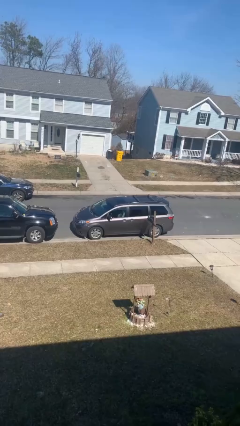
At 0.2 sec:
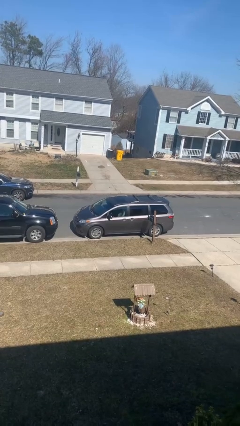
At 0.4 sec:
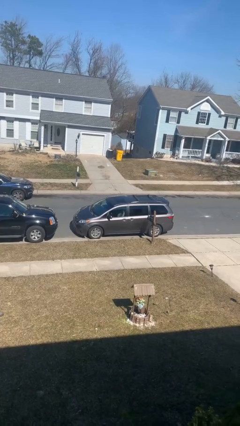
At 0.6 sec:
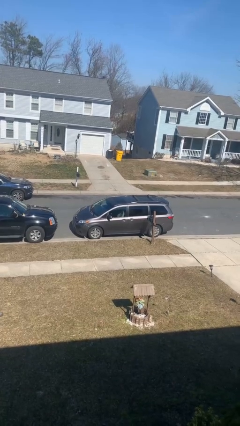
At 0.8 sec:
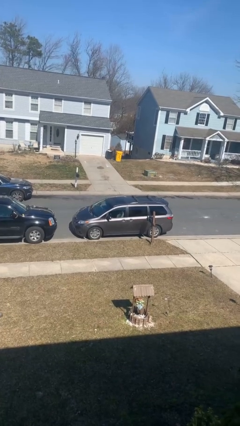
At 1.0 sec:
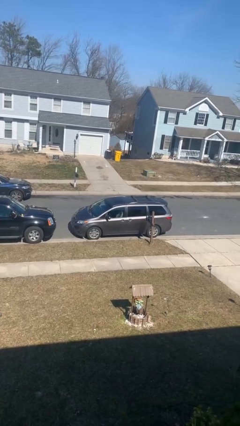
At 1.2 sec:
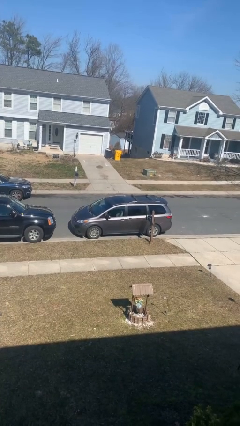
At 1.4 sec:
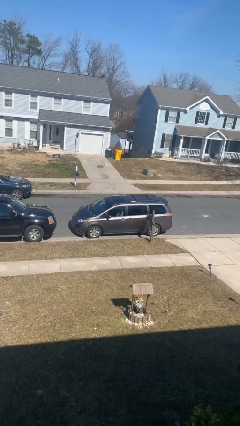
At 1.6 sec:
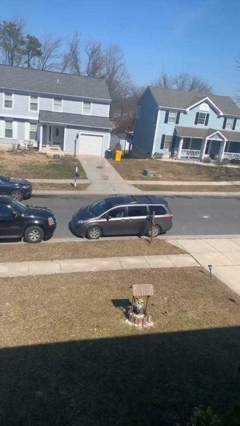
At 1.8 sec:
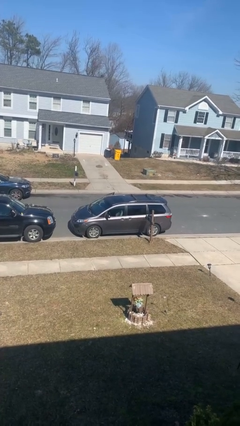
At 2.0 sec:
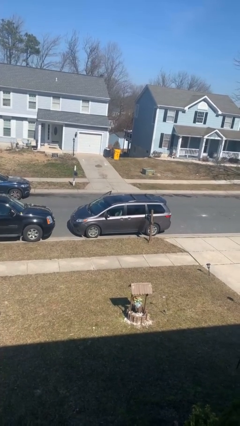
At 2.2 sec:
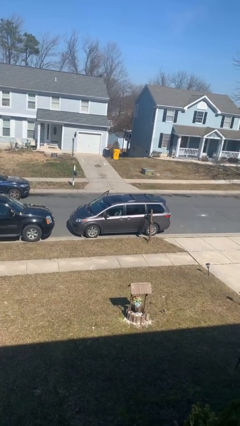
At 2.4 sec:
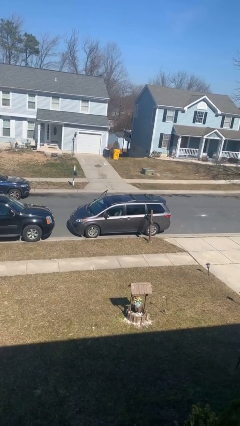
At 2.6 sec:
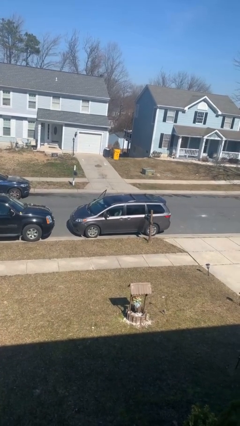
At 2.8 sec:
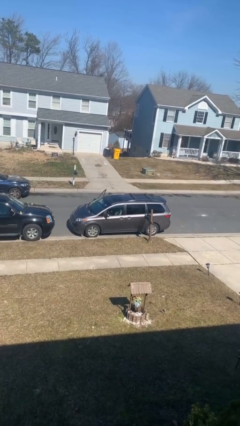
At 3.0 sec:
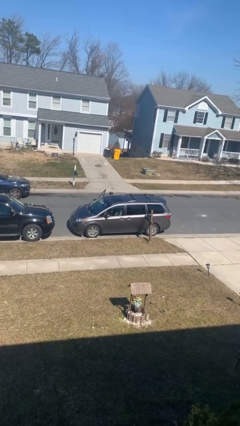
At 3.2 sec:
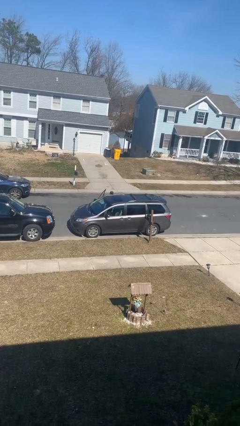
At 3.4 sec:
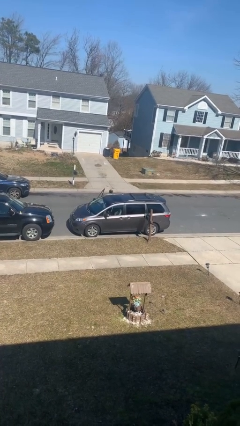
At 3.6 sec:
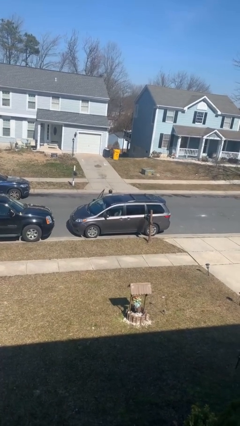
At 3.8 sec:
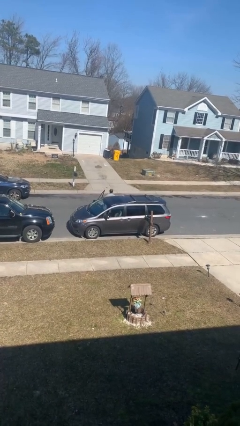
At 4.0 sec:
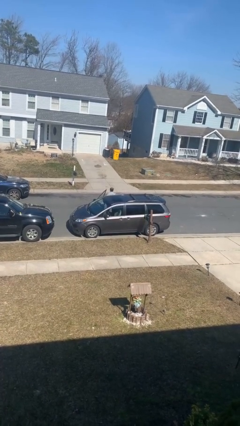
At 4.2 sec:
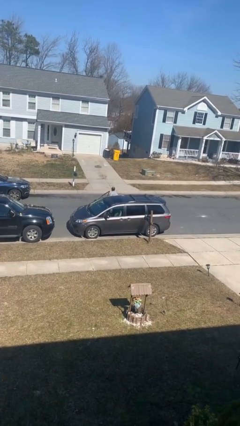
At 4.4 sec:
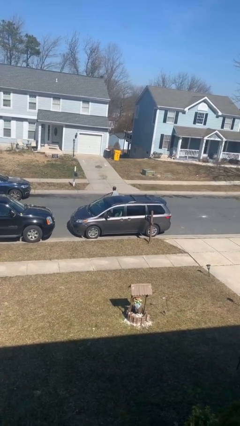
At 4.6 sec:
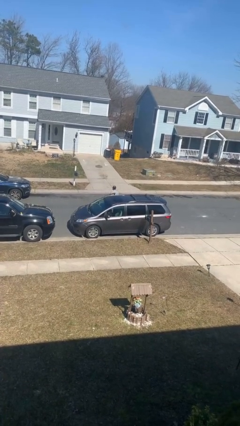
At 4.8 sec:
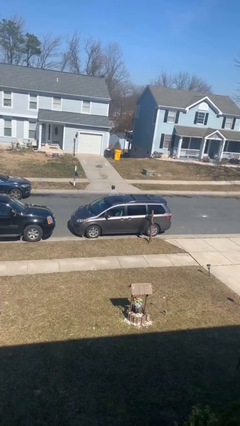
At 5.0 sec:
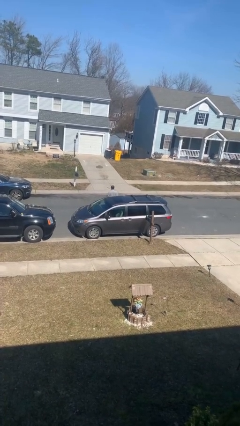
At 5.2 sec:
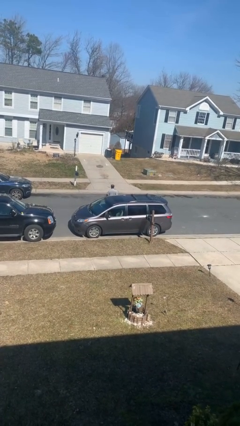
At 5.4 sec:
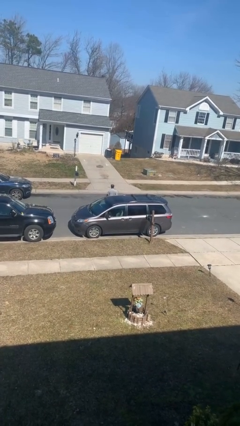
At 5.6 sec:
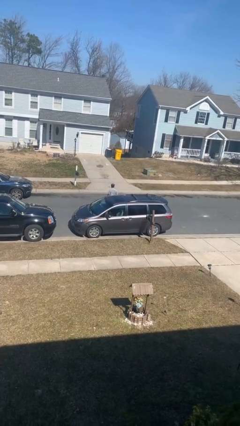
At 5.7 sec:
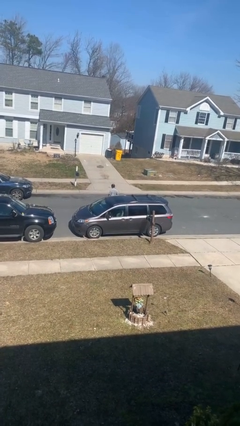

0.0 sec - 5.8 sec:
car drops off person

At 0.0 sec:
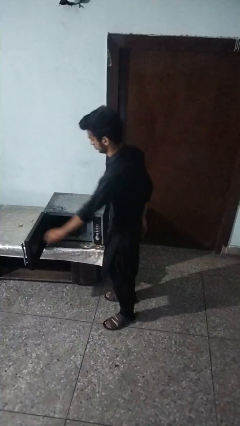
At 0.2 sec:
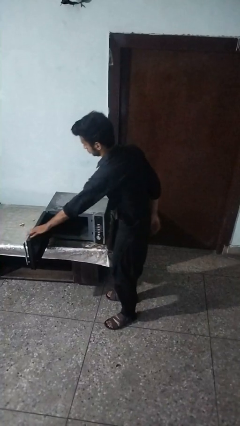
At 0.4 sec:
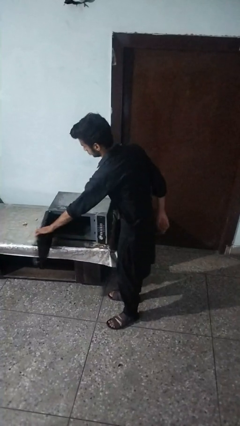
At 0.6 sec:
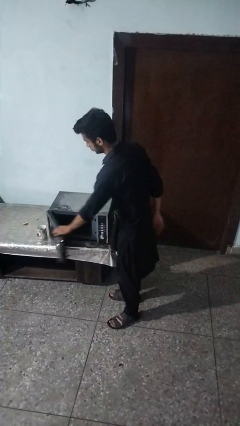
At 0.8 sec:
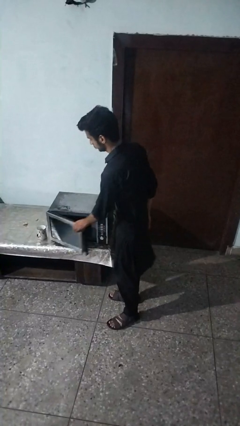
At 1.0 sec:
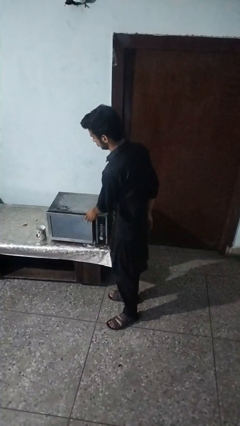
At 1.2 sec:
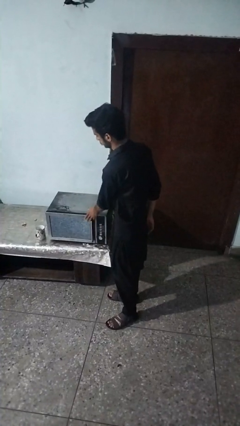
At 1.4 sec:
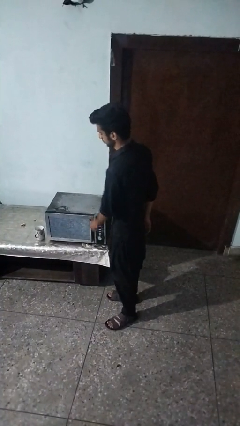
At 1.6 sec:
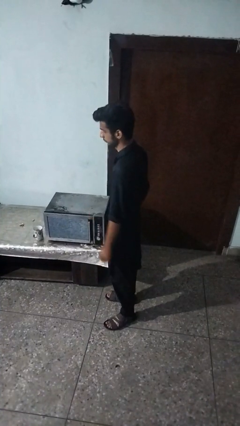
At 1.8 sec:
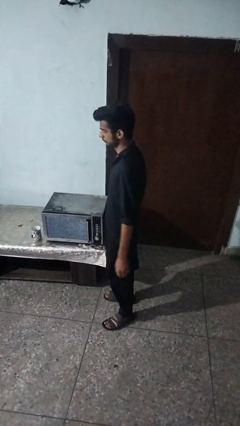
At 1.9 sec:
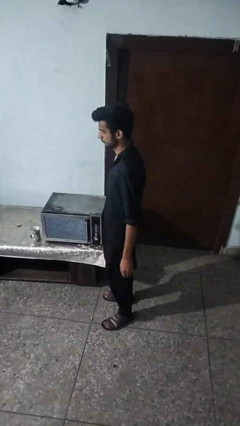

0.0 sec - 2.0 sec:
person closes oven door

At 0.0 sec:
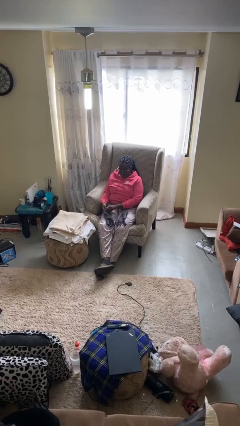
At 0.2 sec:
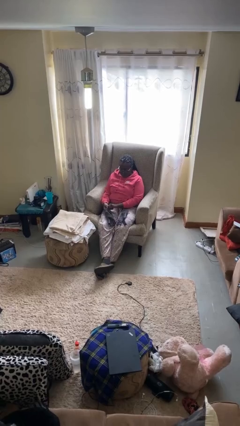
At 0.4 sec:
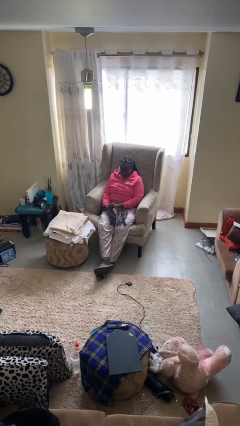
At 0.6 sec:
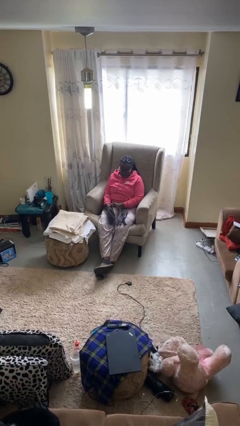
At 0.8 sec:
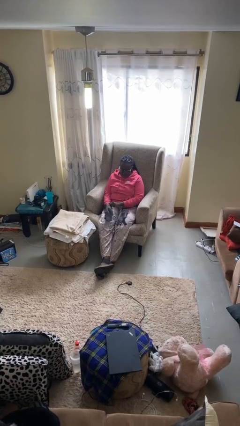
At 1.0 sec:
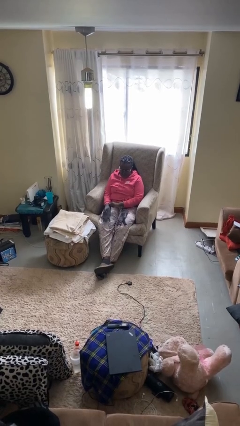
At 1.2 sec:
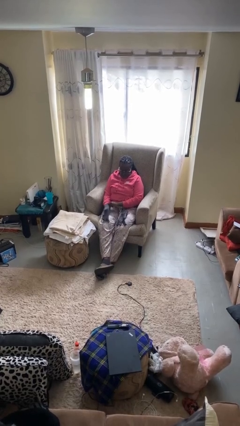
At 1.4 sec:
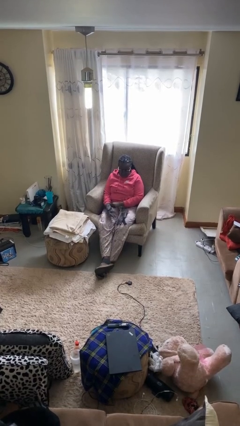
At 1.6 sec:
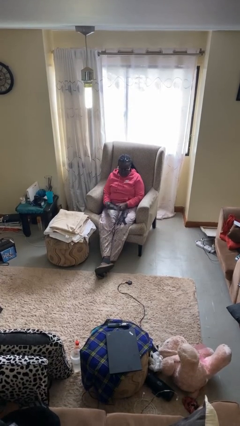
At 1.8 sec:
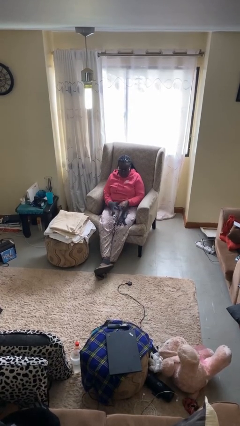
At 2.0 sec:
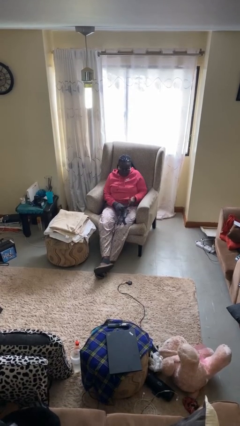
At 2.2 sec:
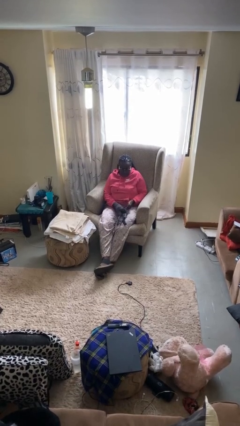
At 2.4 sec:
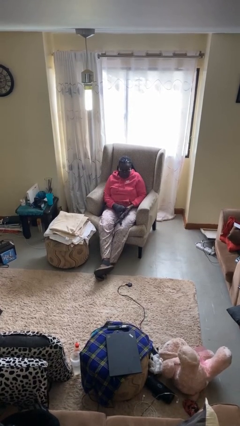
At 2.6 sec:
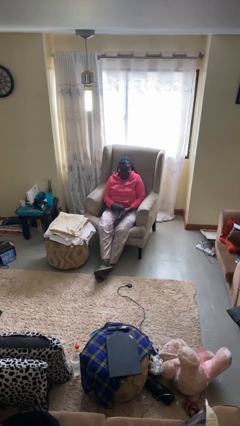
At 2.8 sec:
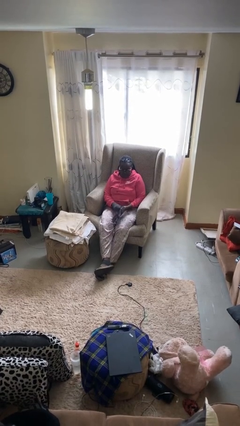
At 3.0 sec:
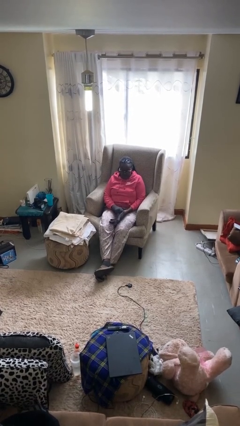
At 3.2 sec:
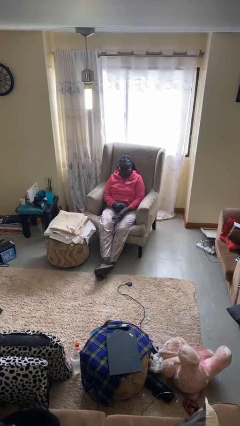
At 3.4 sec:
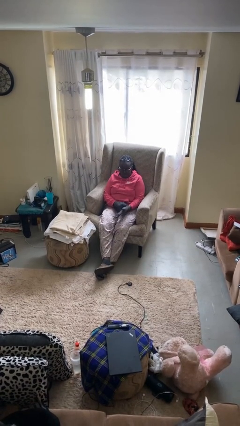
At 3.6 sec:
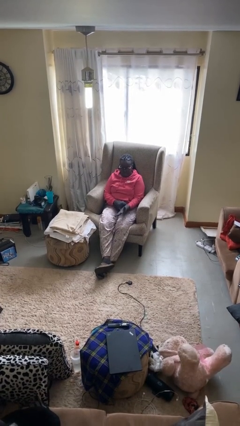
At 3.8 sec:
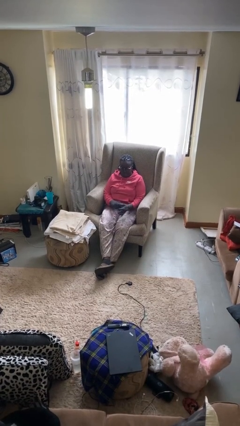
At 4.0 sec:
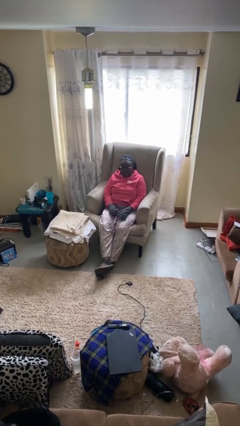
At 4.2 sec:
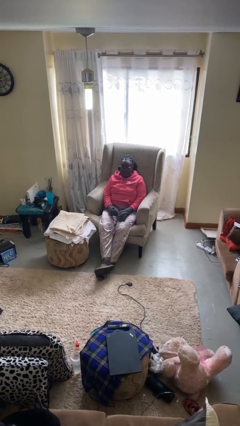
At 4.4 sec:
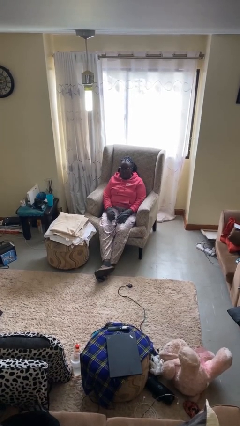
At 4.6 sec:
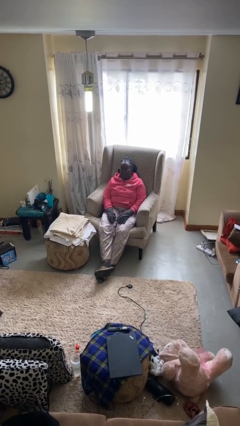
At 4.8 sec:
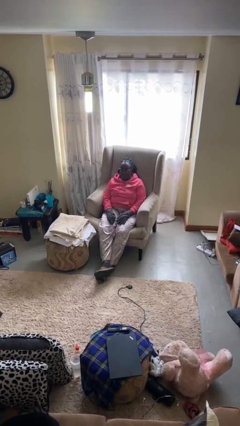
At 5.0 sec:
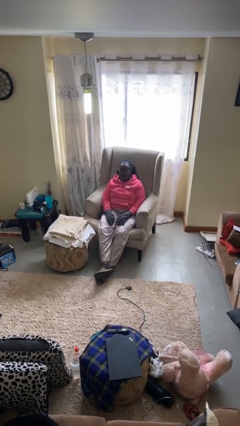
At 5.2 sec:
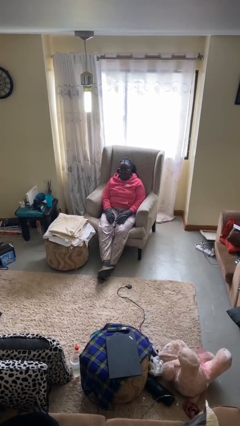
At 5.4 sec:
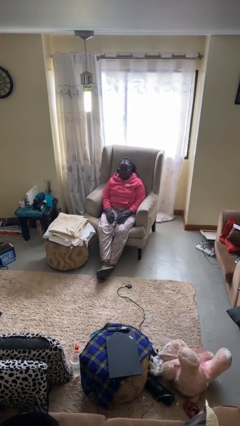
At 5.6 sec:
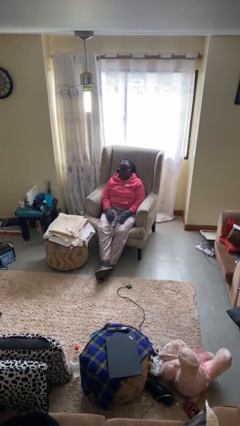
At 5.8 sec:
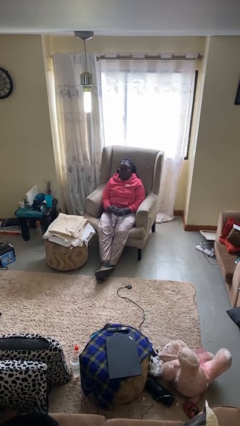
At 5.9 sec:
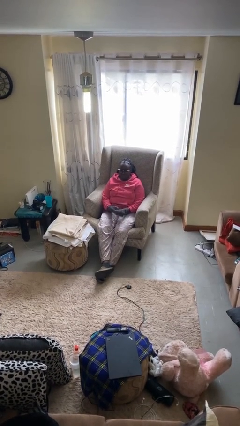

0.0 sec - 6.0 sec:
person puts on gloves

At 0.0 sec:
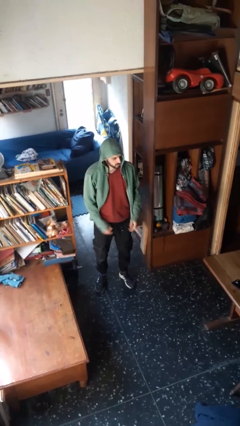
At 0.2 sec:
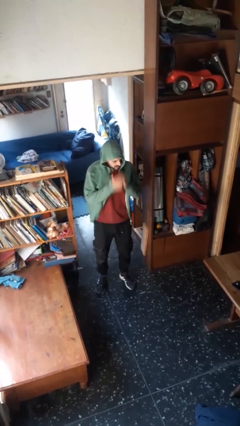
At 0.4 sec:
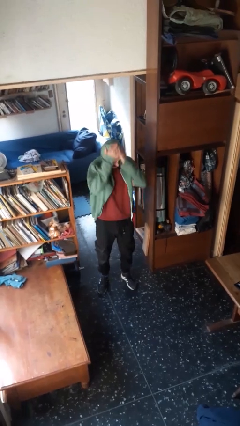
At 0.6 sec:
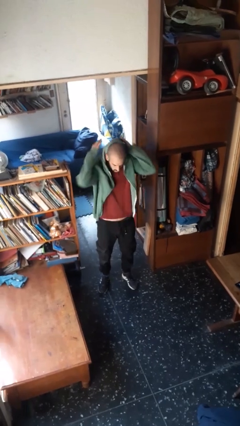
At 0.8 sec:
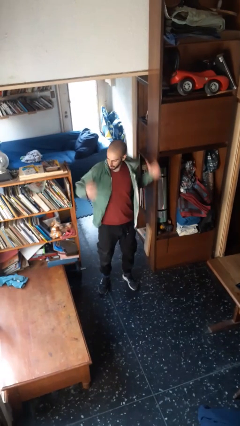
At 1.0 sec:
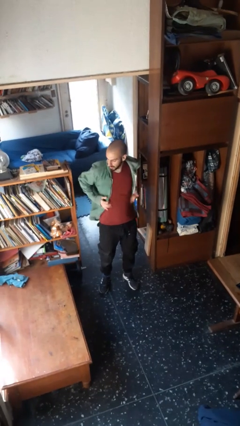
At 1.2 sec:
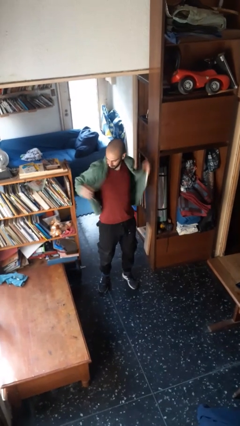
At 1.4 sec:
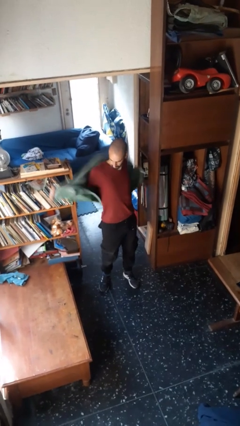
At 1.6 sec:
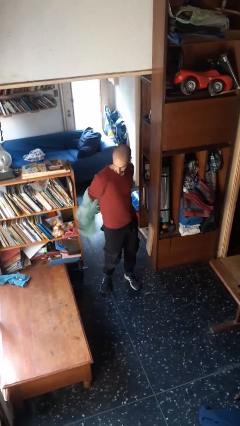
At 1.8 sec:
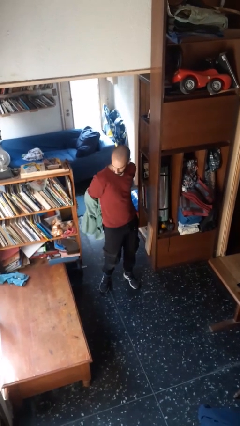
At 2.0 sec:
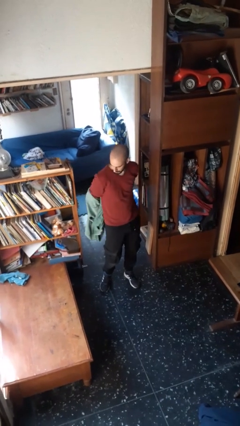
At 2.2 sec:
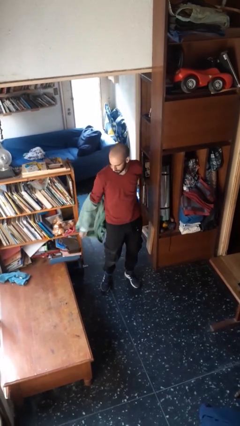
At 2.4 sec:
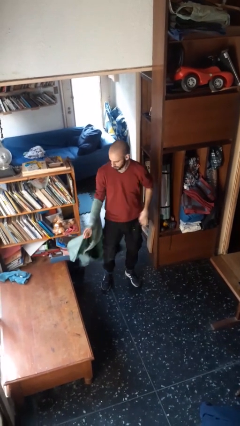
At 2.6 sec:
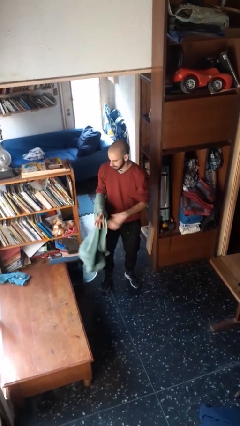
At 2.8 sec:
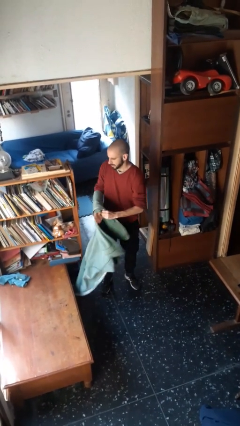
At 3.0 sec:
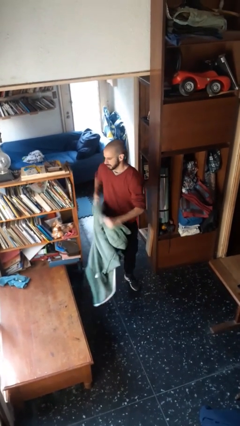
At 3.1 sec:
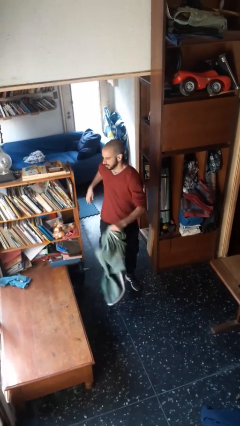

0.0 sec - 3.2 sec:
person takes off hoodie

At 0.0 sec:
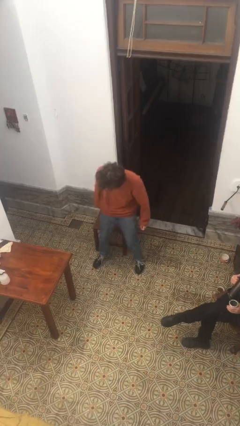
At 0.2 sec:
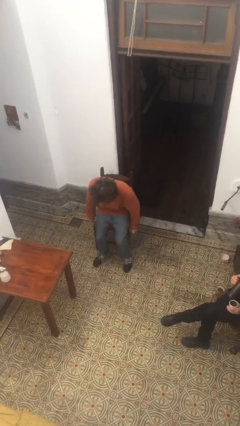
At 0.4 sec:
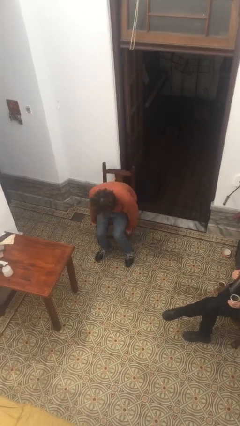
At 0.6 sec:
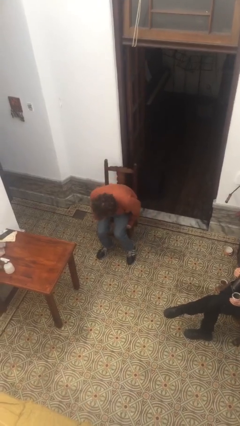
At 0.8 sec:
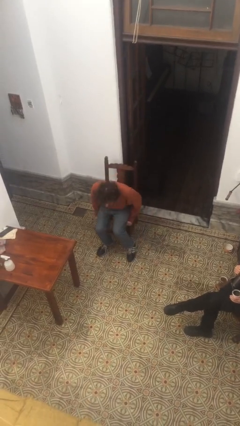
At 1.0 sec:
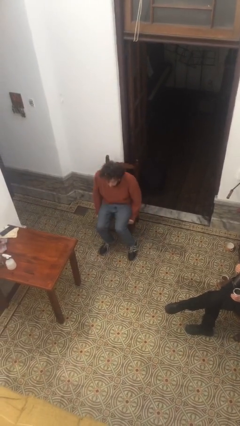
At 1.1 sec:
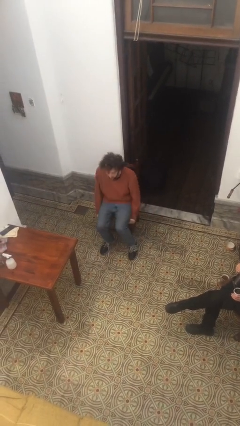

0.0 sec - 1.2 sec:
person sits down
